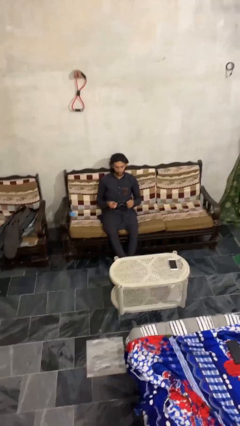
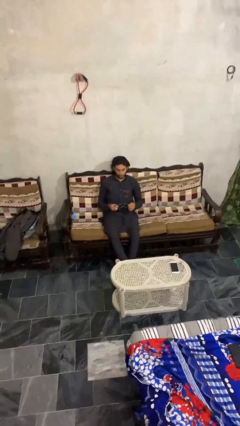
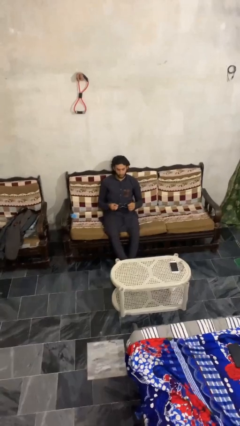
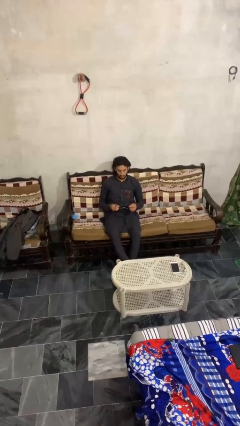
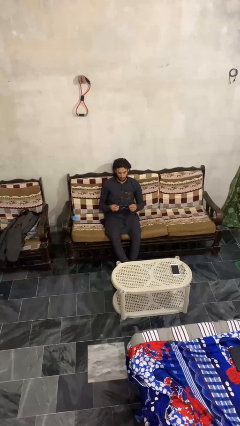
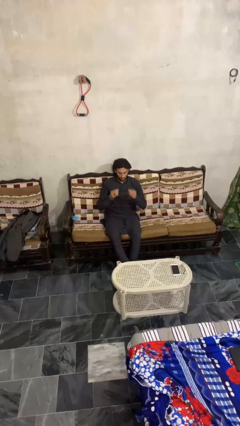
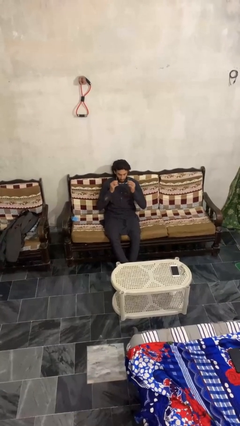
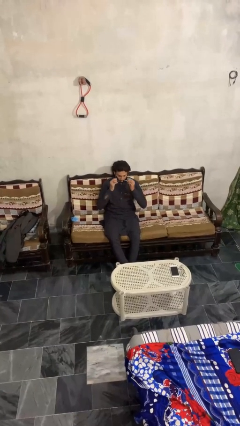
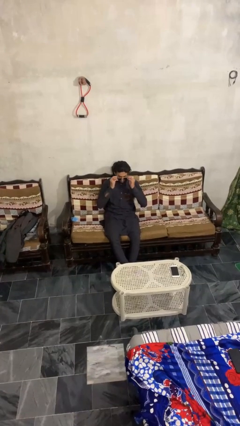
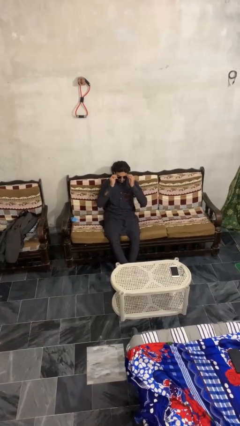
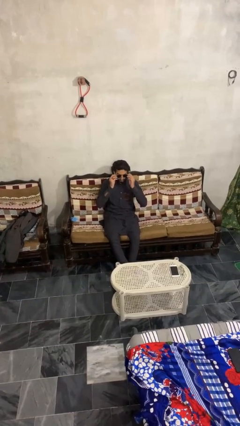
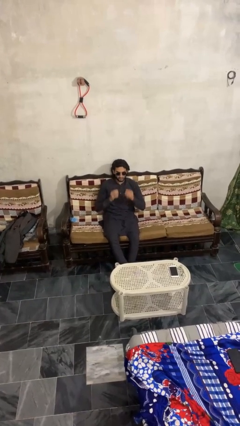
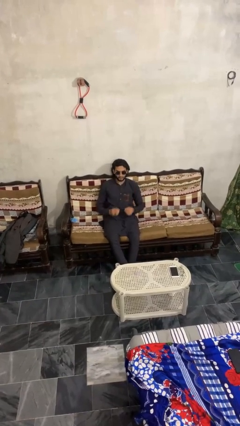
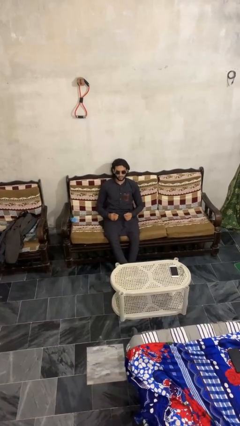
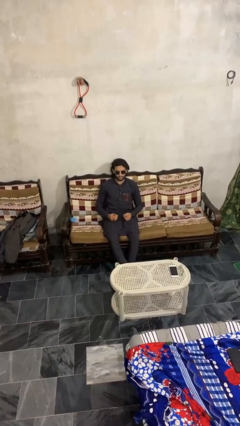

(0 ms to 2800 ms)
person puts on sunglasses

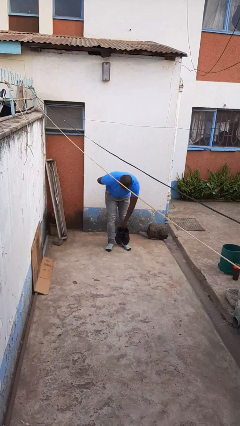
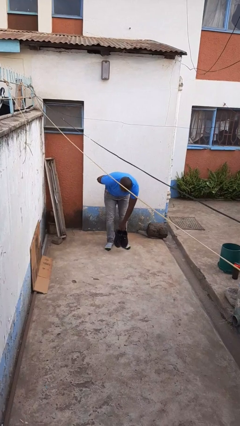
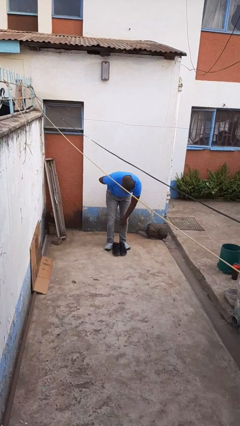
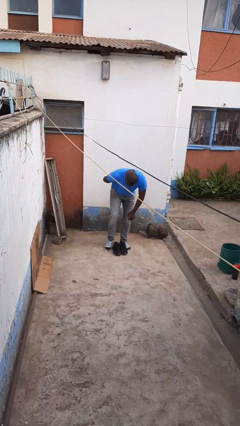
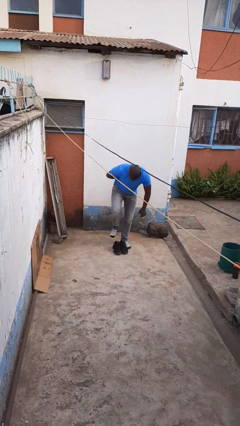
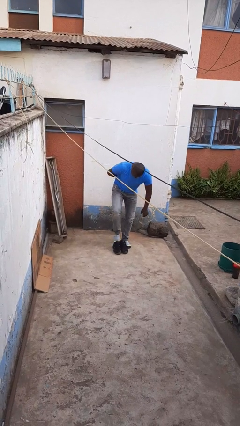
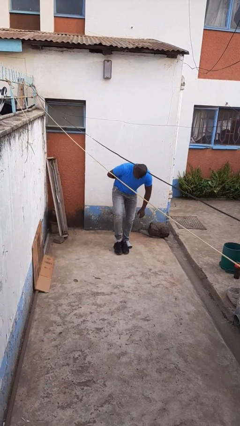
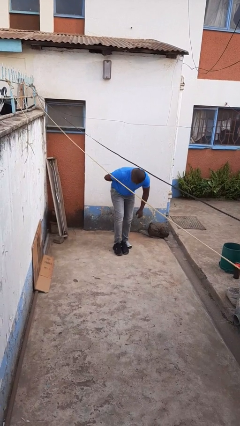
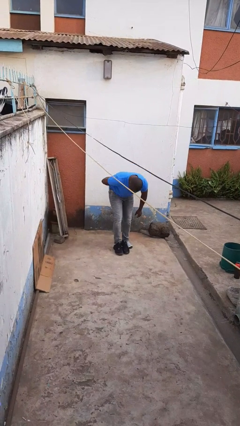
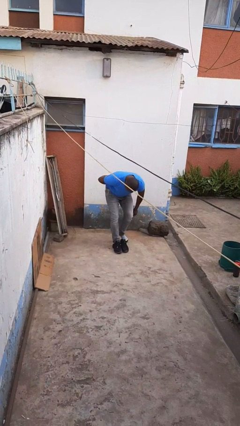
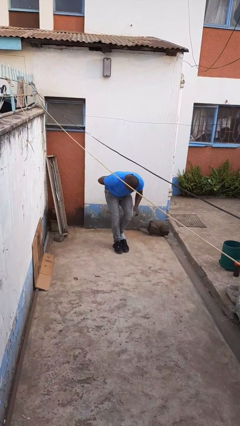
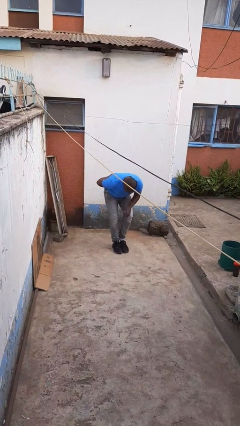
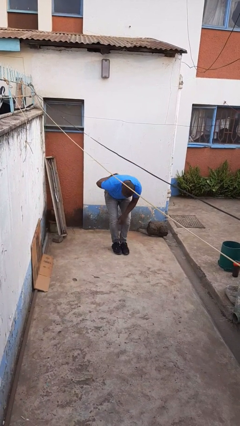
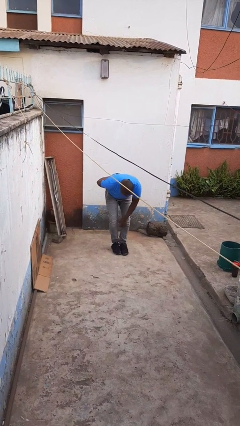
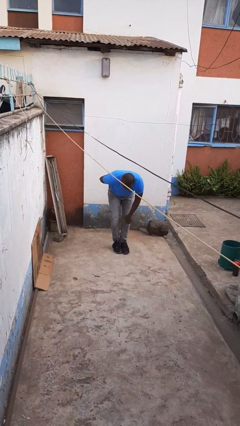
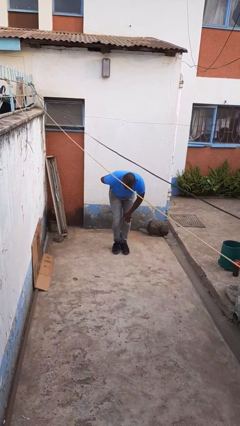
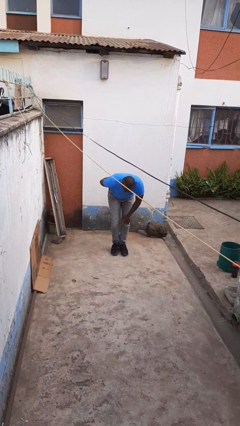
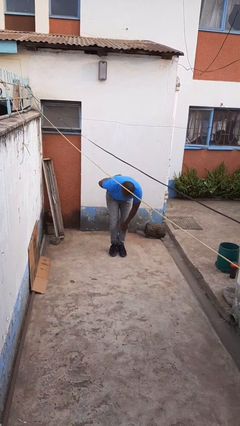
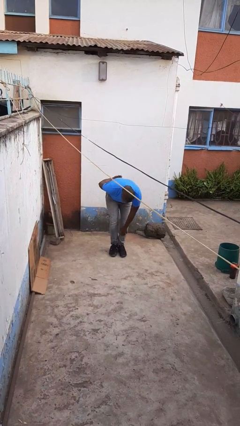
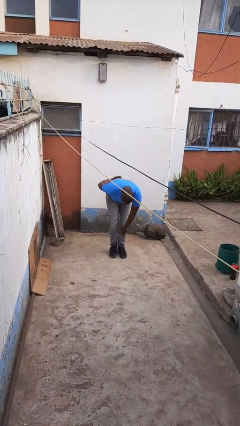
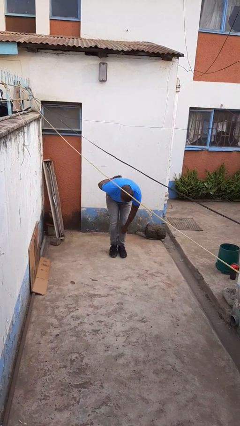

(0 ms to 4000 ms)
person puts on shoes

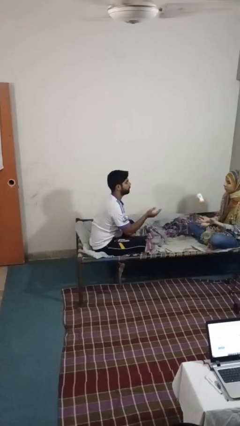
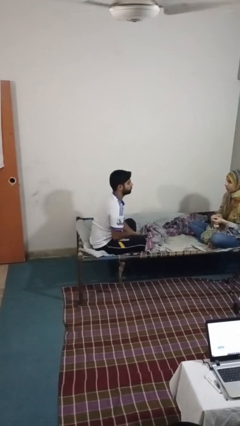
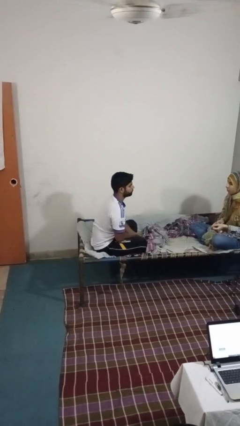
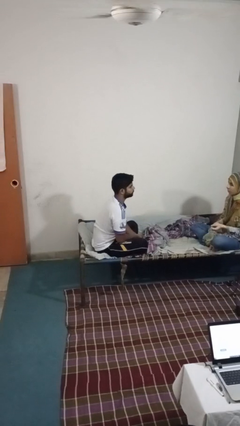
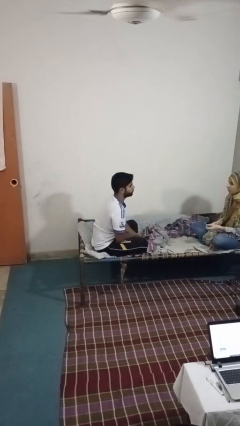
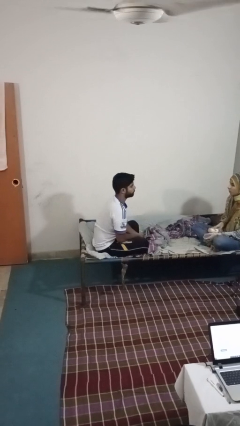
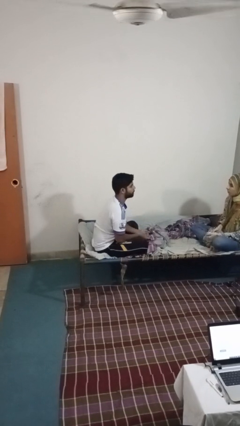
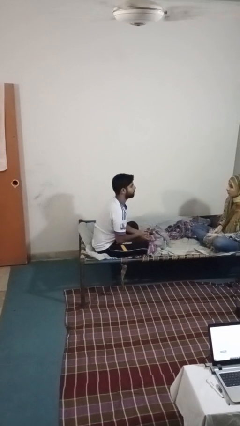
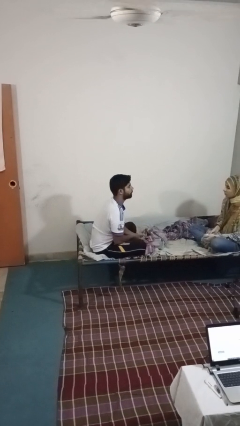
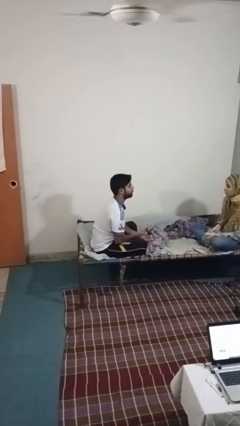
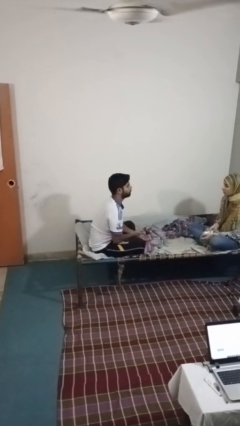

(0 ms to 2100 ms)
person throws object to person

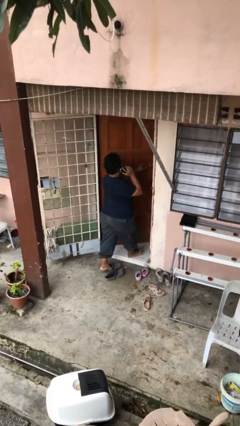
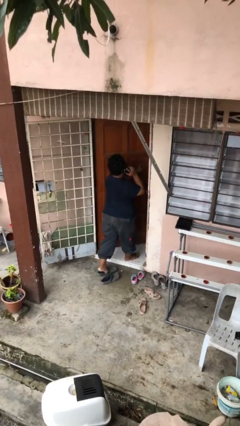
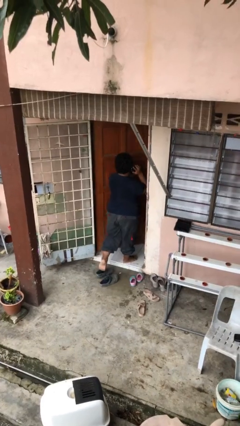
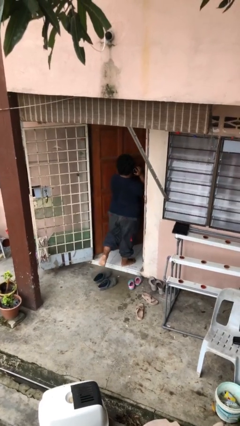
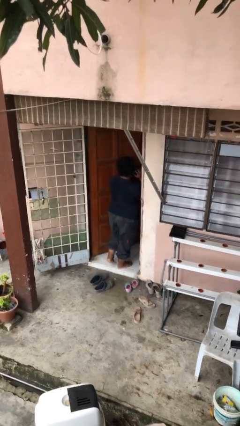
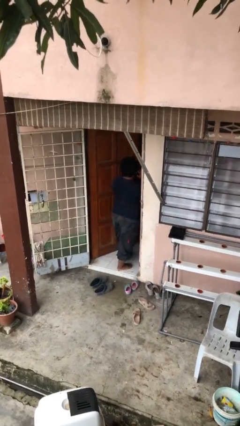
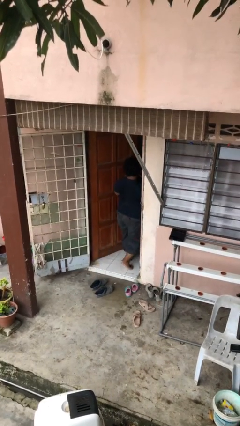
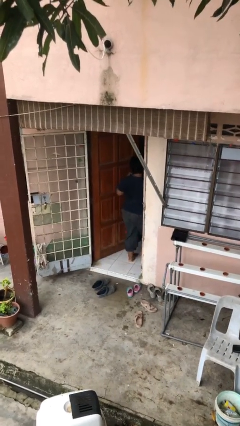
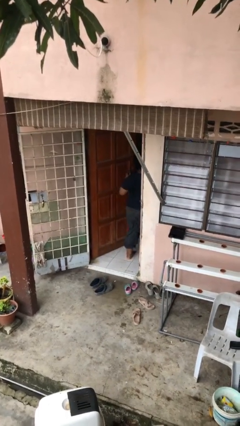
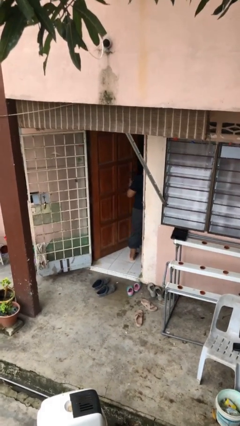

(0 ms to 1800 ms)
person exits scene through structure

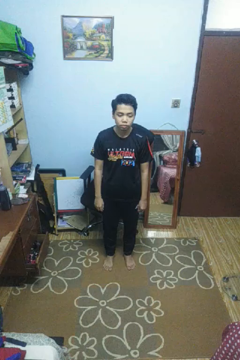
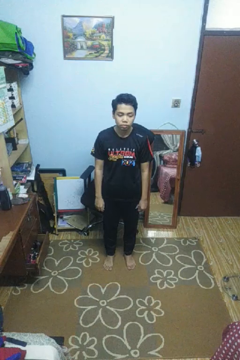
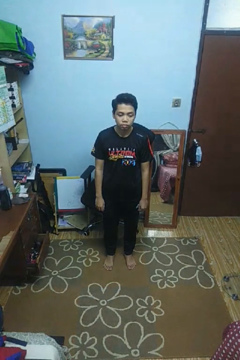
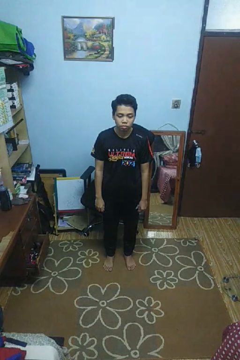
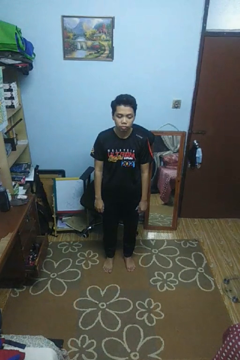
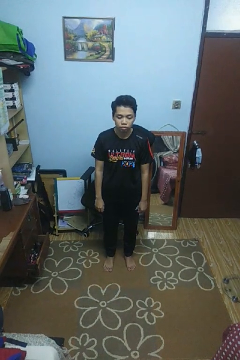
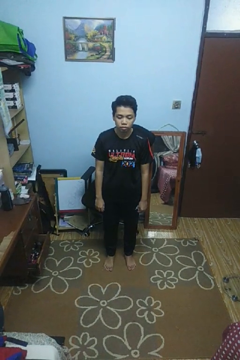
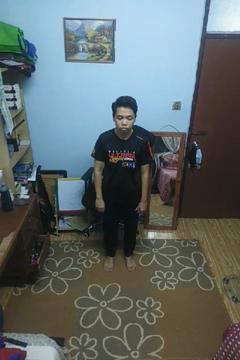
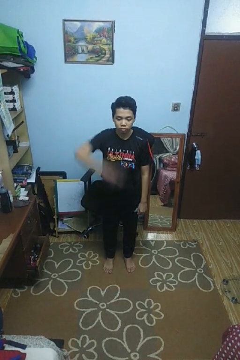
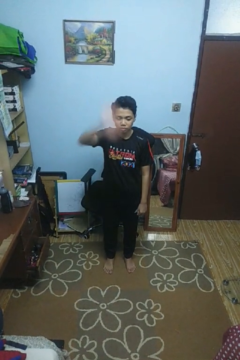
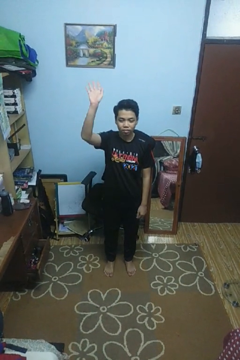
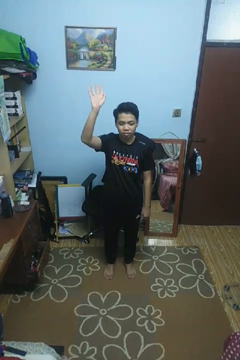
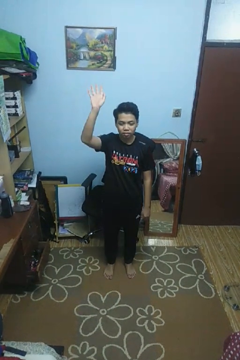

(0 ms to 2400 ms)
person gestures swipe up

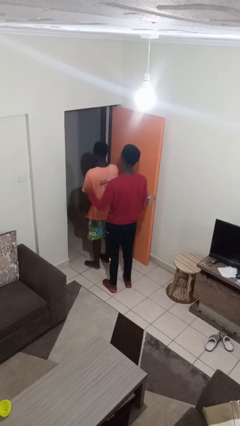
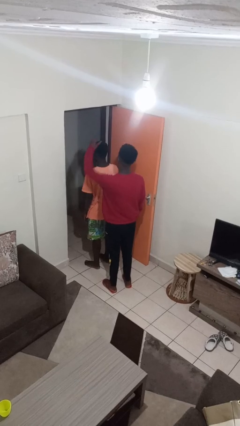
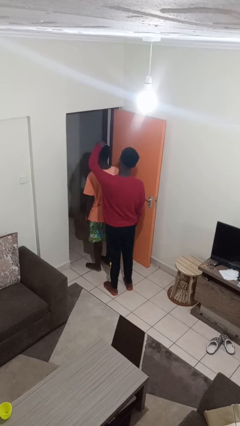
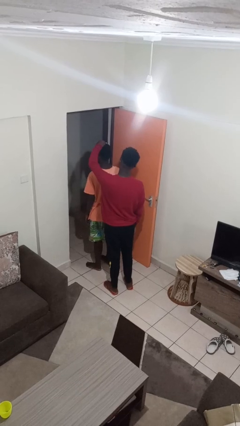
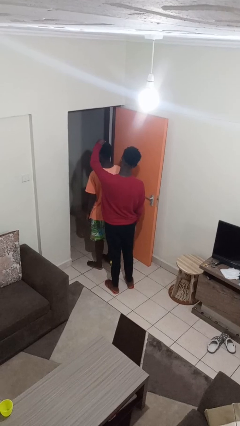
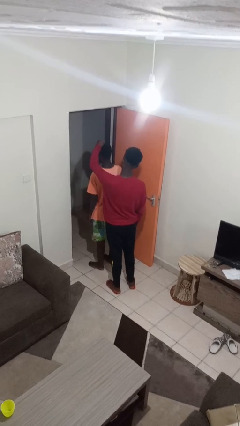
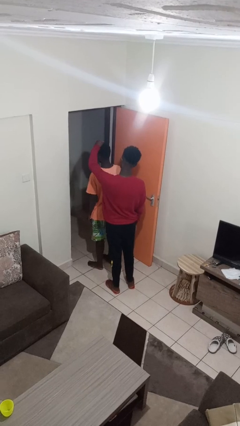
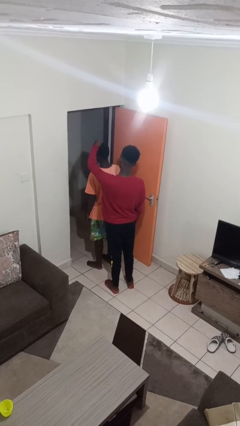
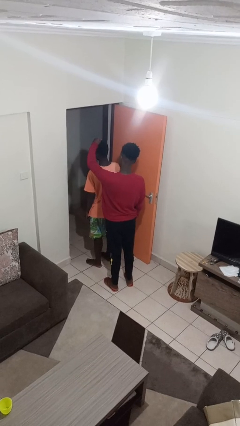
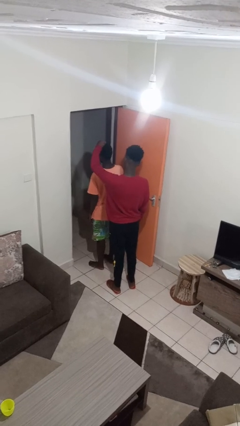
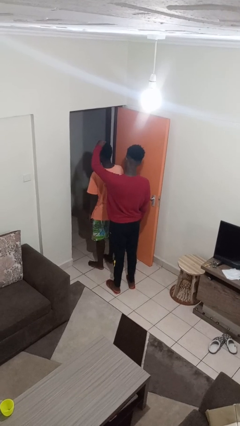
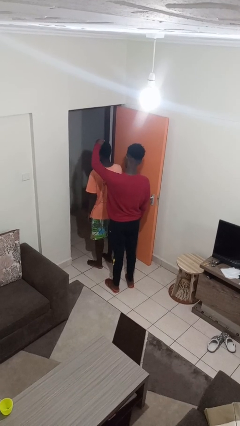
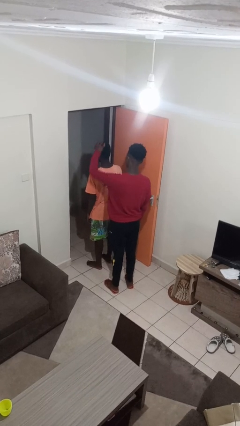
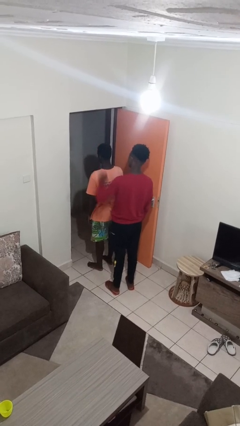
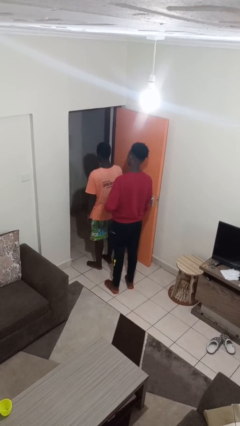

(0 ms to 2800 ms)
person grabs person by hair

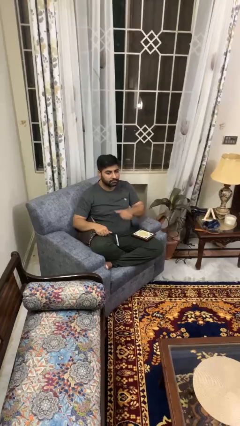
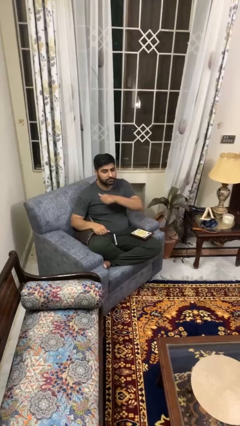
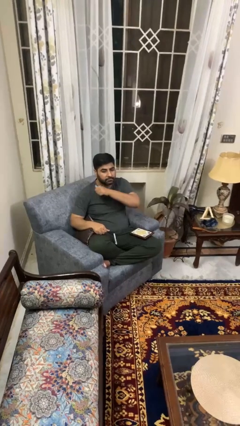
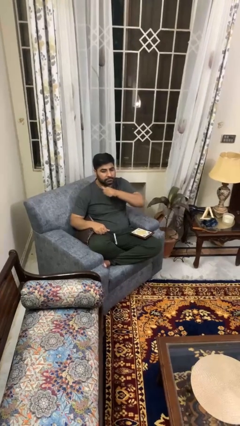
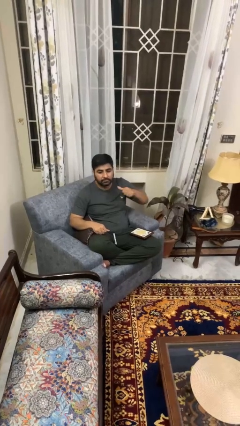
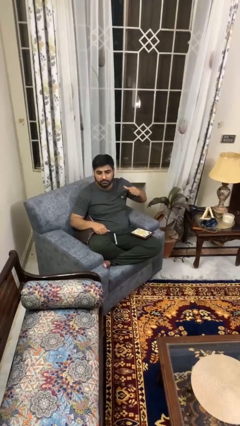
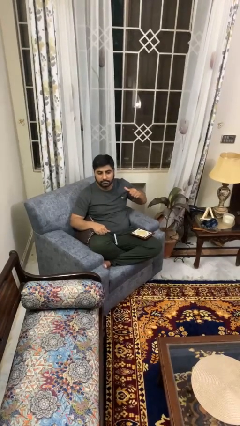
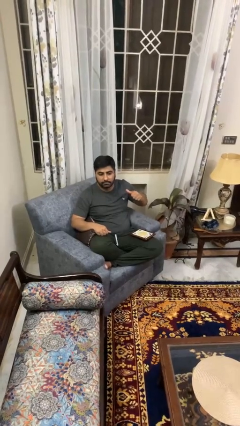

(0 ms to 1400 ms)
person gestures cut

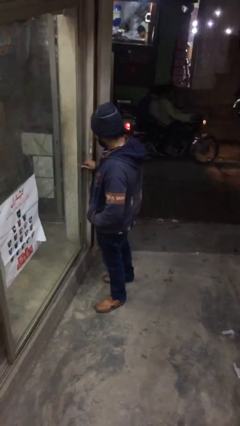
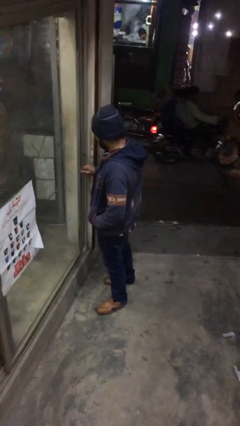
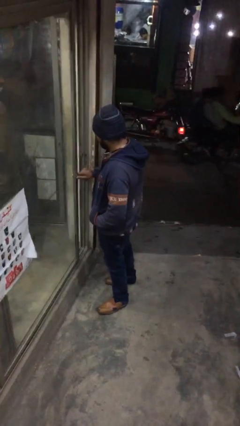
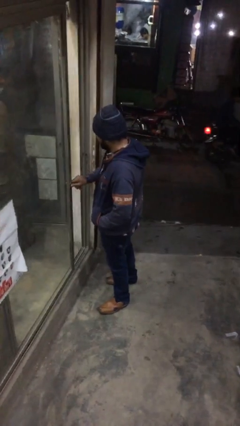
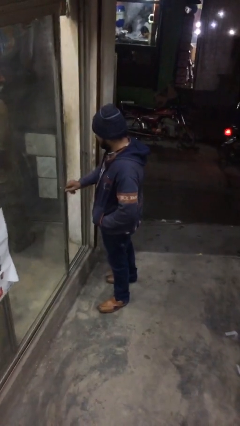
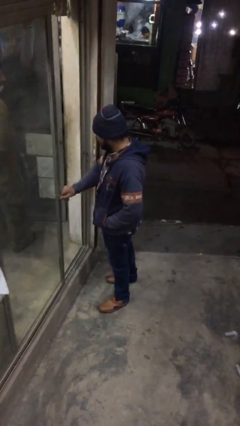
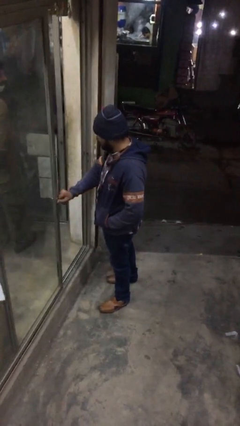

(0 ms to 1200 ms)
person opens facility door
